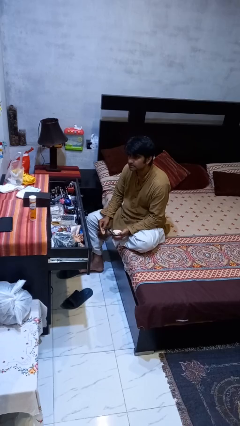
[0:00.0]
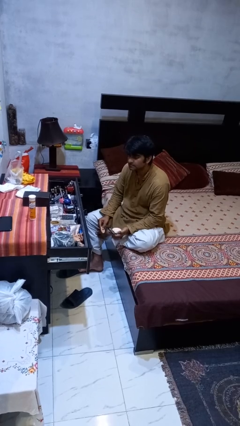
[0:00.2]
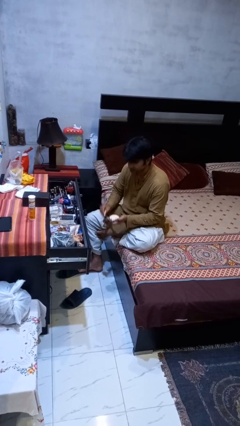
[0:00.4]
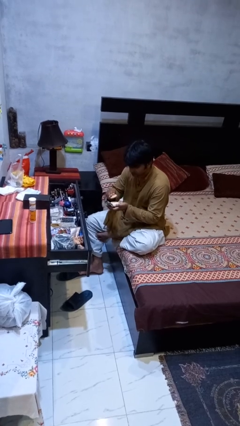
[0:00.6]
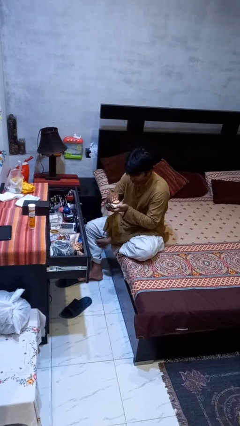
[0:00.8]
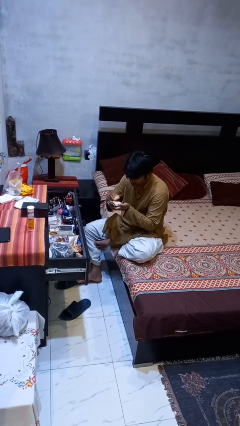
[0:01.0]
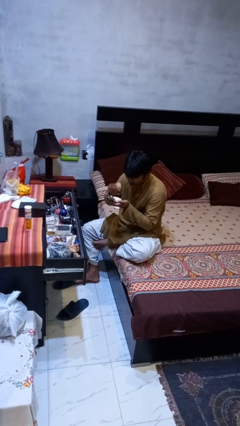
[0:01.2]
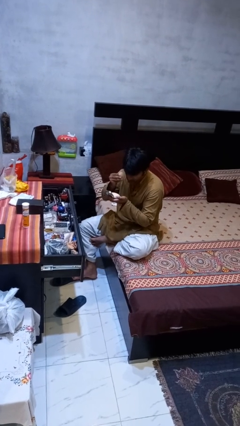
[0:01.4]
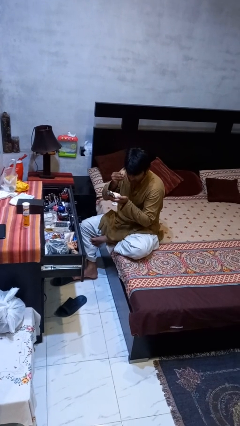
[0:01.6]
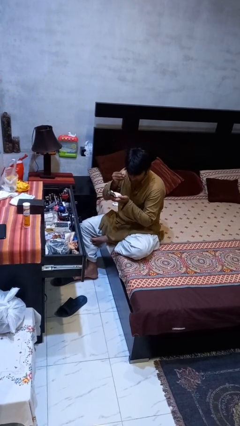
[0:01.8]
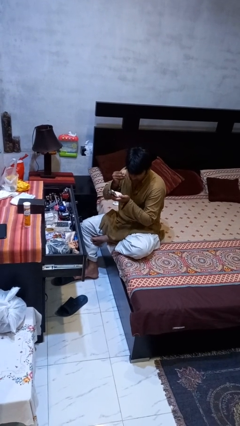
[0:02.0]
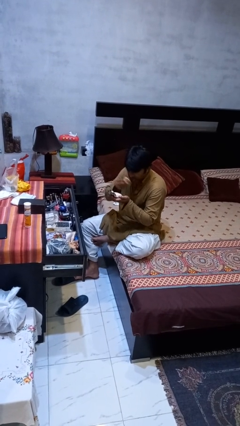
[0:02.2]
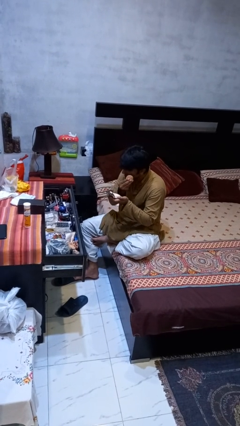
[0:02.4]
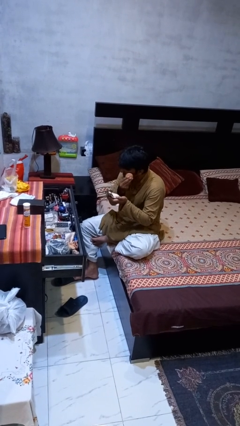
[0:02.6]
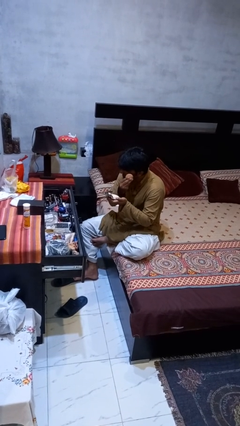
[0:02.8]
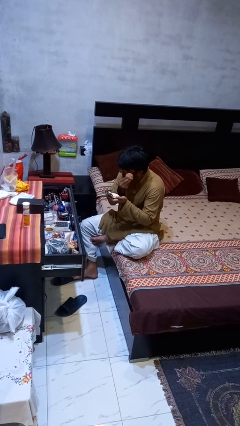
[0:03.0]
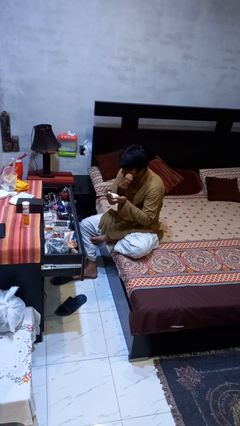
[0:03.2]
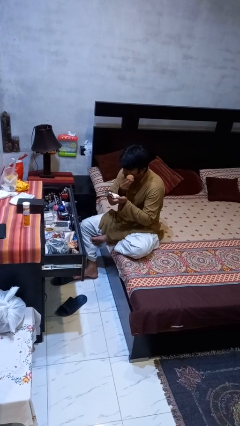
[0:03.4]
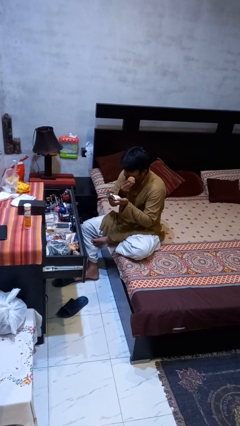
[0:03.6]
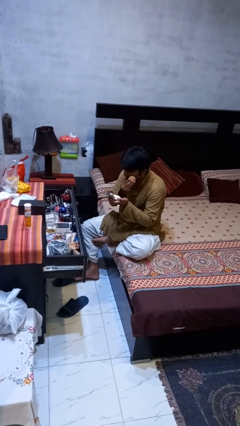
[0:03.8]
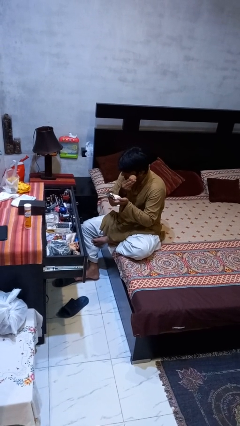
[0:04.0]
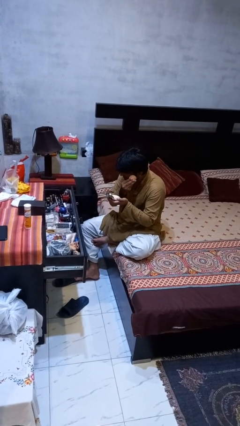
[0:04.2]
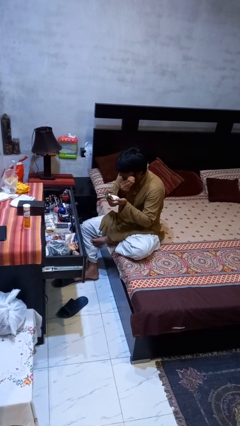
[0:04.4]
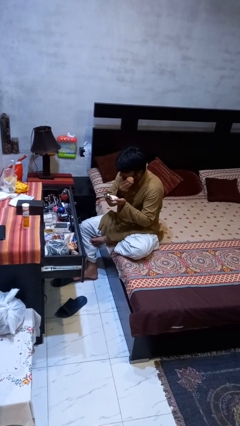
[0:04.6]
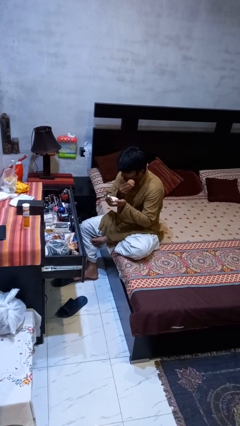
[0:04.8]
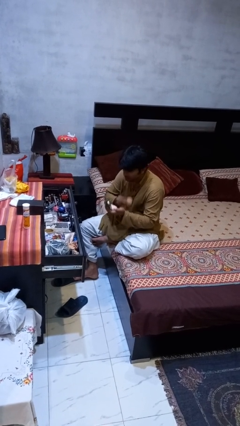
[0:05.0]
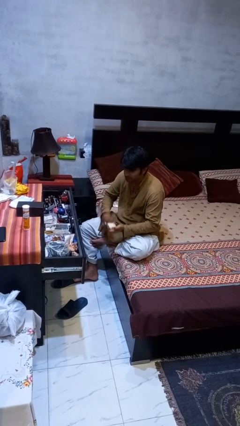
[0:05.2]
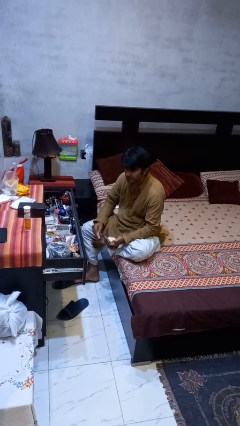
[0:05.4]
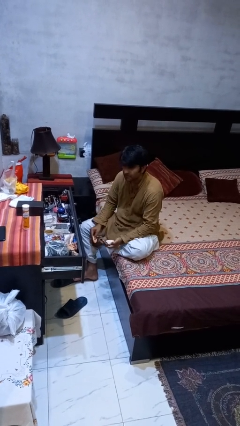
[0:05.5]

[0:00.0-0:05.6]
person applies foundation makeup

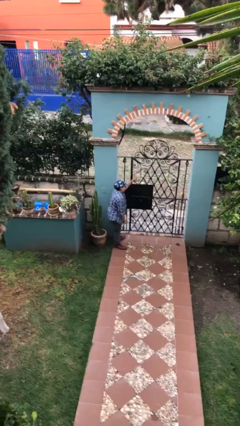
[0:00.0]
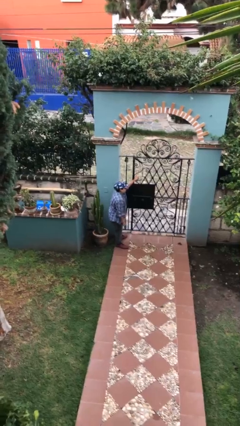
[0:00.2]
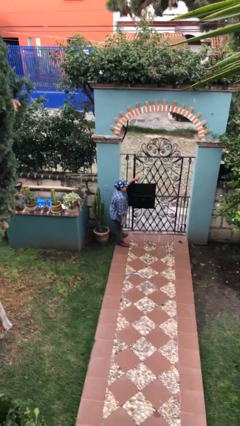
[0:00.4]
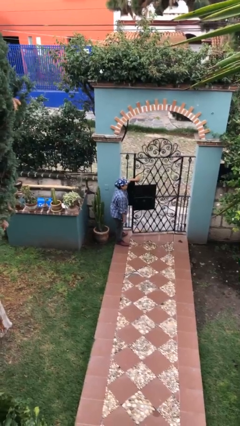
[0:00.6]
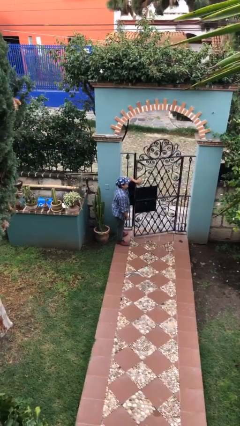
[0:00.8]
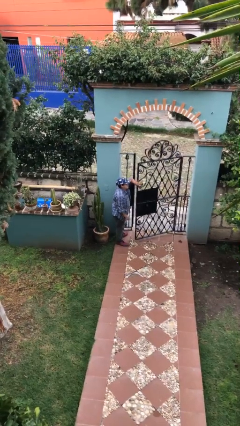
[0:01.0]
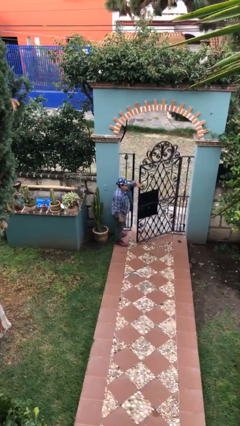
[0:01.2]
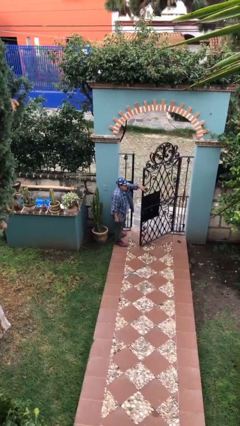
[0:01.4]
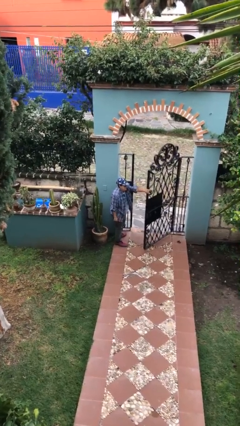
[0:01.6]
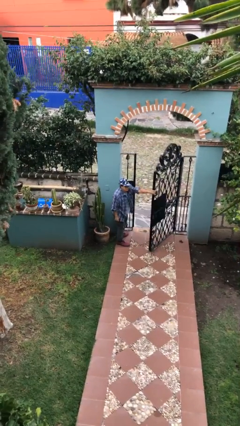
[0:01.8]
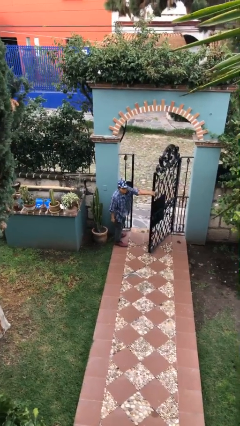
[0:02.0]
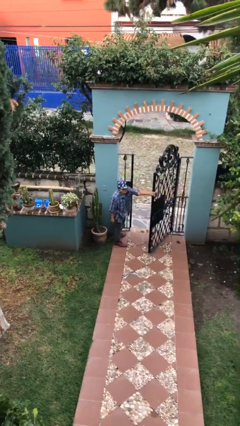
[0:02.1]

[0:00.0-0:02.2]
person opens facility door

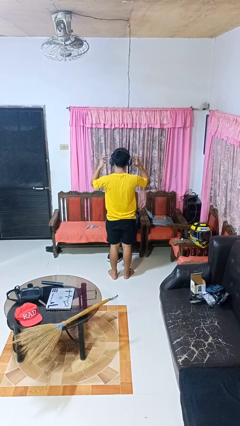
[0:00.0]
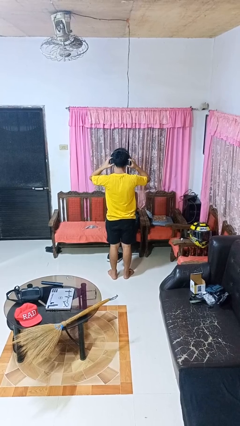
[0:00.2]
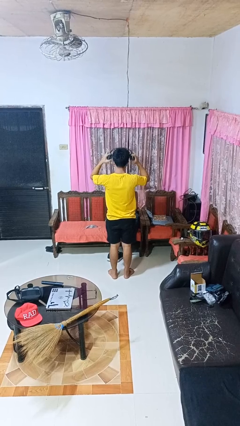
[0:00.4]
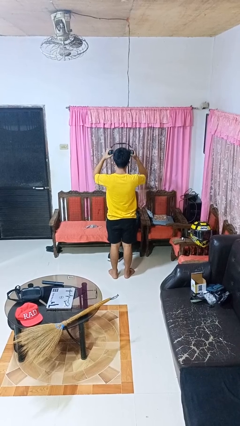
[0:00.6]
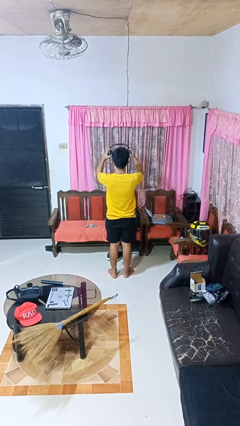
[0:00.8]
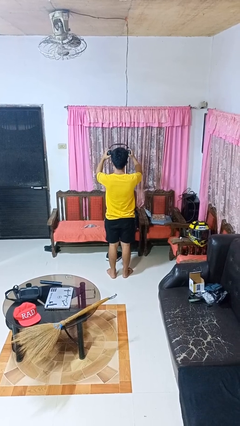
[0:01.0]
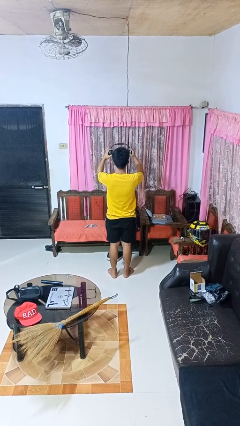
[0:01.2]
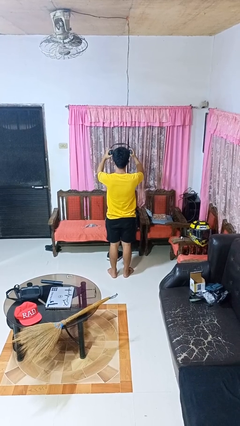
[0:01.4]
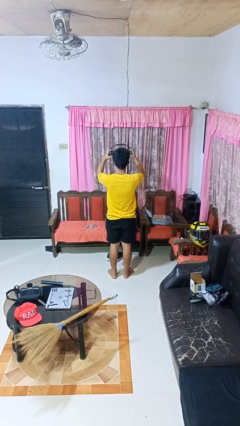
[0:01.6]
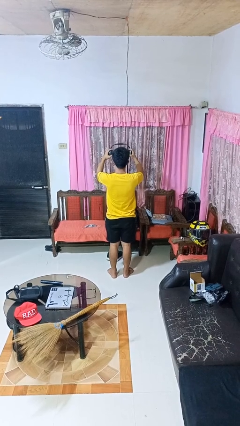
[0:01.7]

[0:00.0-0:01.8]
person takes off headphones

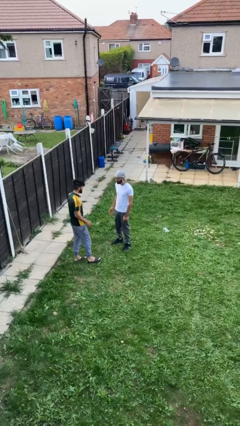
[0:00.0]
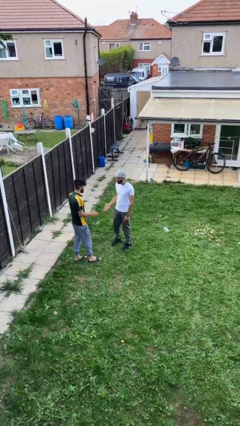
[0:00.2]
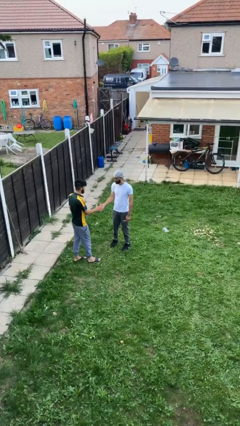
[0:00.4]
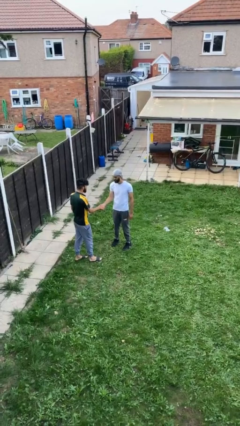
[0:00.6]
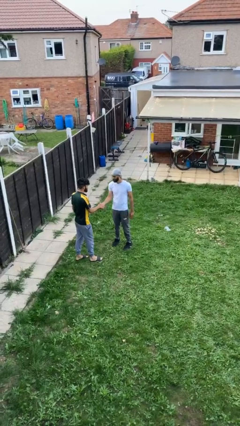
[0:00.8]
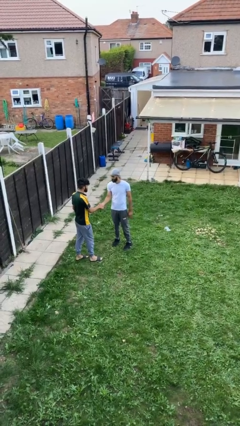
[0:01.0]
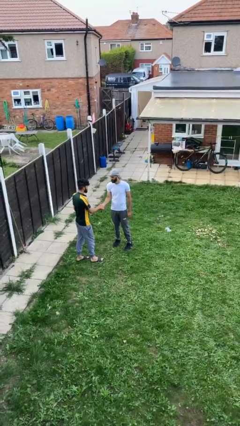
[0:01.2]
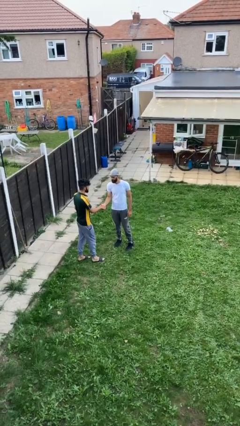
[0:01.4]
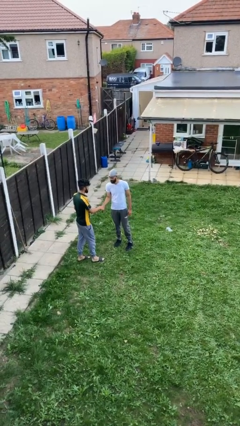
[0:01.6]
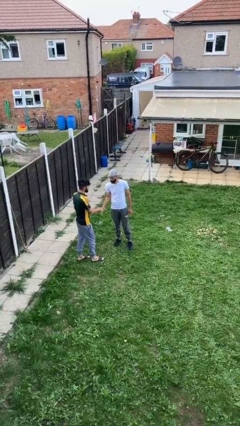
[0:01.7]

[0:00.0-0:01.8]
person shakes hand

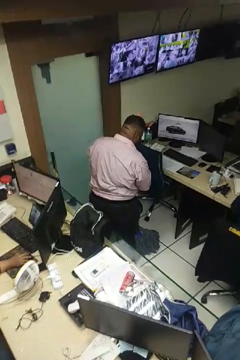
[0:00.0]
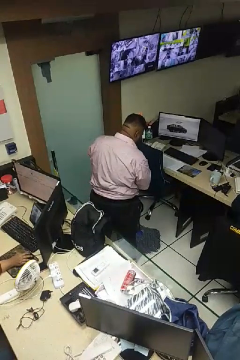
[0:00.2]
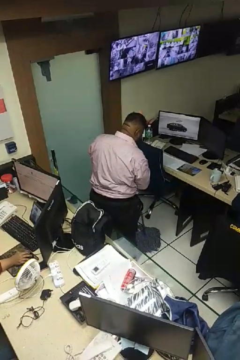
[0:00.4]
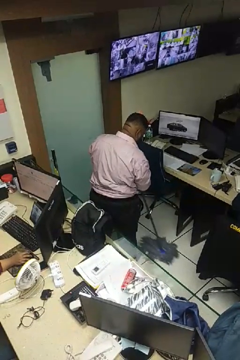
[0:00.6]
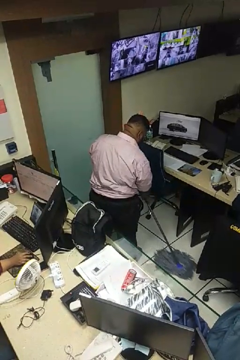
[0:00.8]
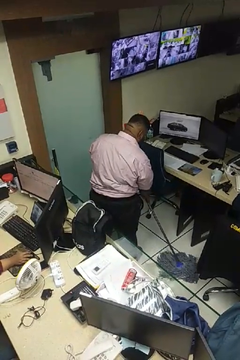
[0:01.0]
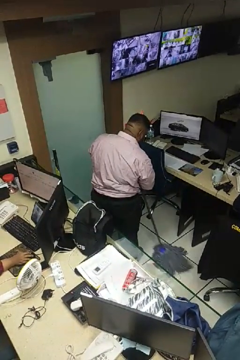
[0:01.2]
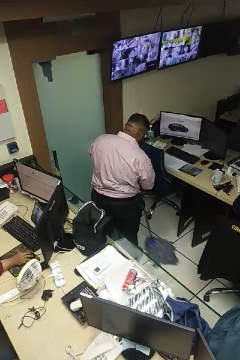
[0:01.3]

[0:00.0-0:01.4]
person mops

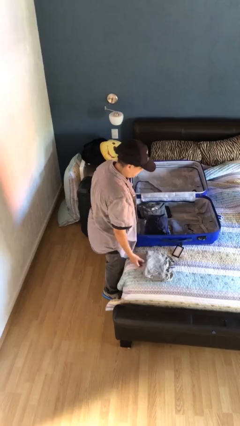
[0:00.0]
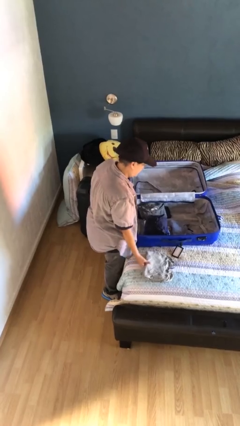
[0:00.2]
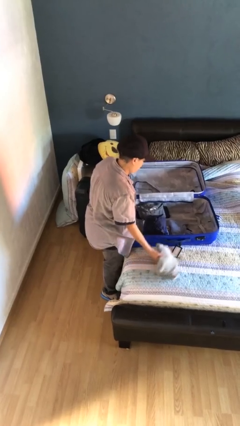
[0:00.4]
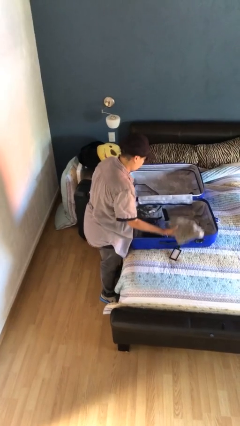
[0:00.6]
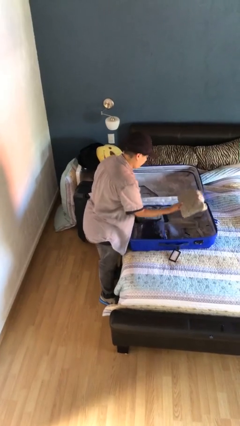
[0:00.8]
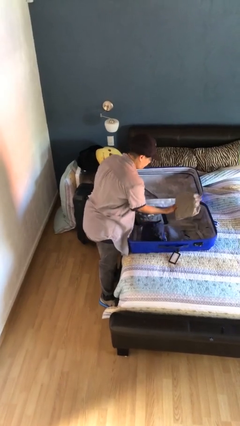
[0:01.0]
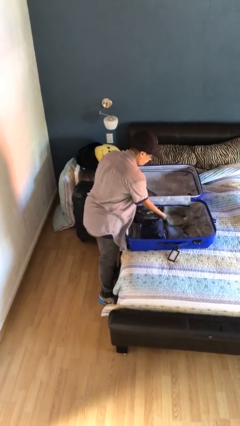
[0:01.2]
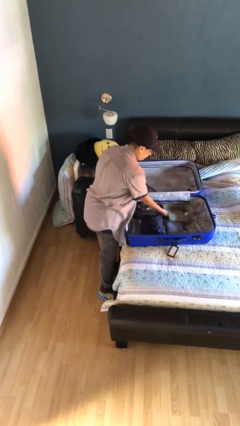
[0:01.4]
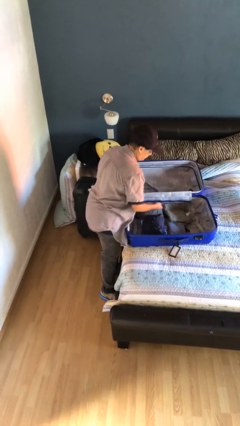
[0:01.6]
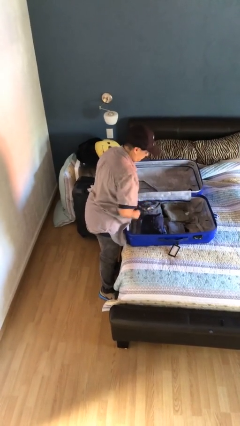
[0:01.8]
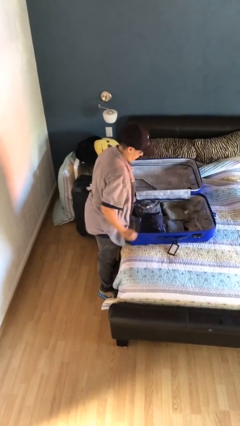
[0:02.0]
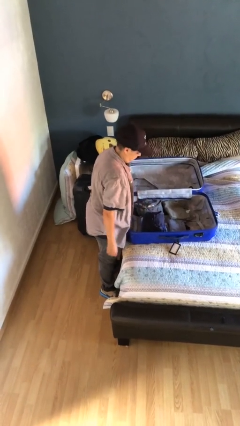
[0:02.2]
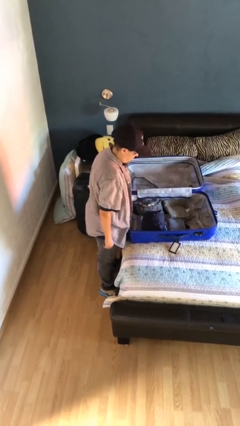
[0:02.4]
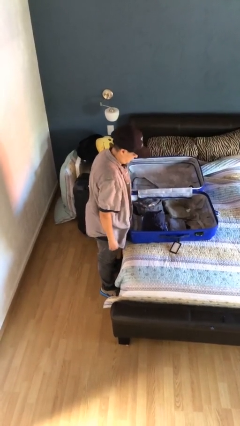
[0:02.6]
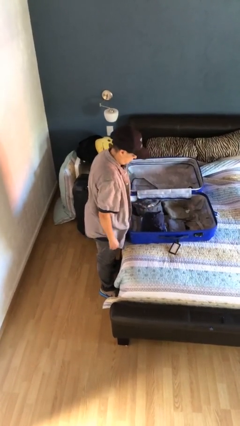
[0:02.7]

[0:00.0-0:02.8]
person loads clothes into suitcase

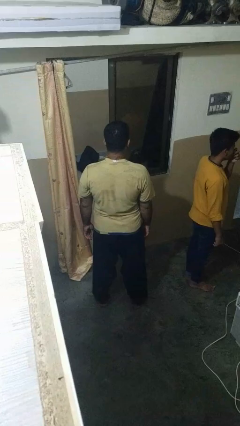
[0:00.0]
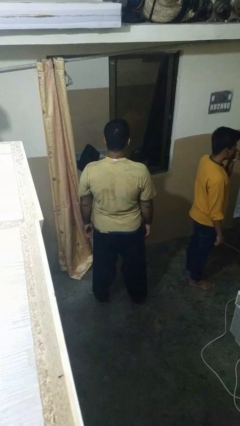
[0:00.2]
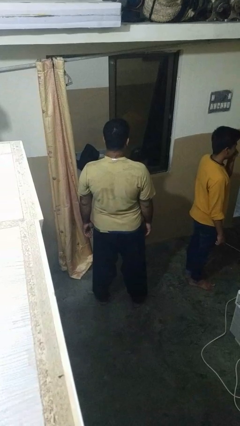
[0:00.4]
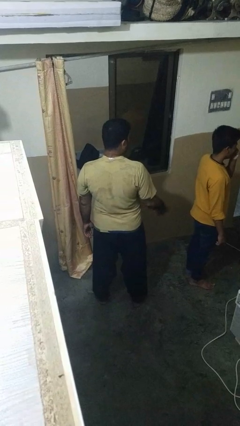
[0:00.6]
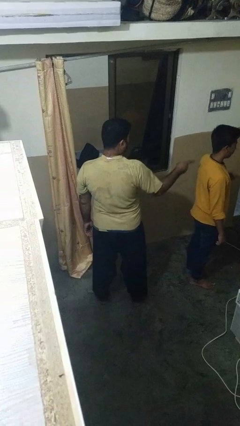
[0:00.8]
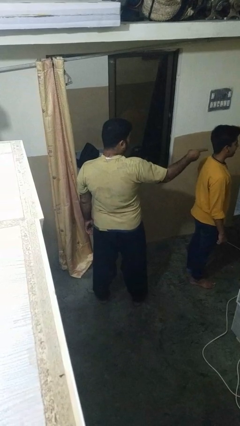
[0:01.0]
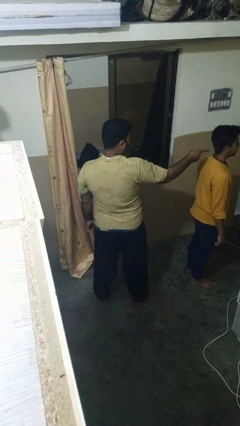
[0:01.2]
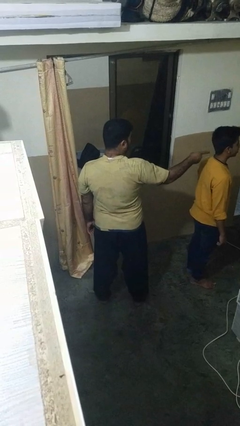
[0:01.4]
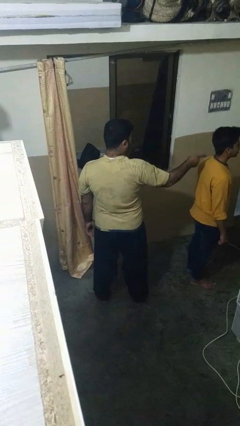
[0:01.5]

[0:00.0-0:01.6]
person points at person
